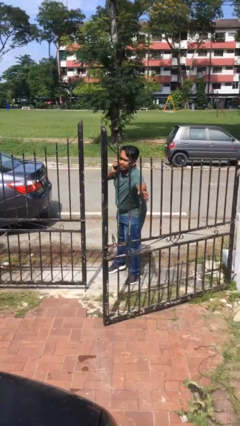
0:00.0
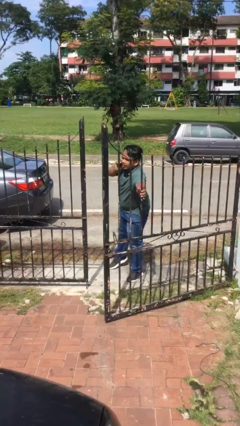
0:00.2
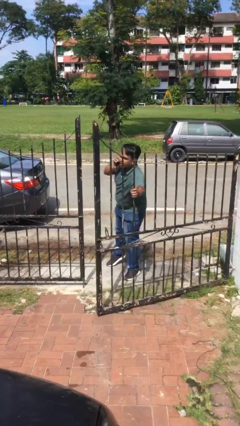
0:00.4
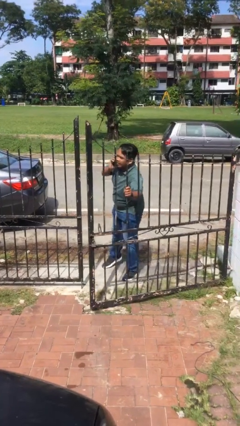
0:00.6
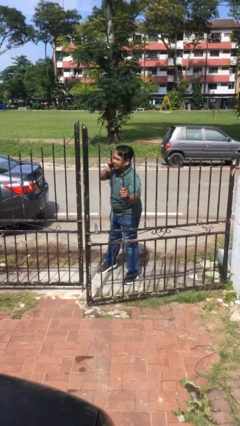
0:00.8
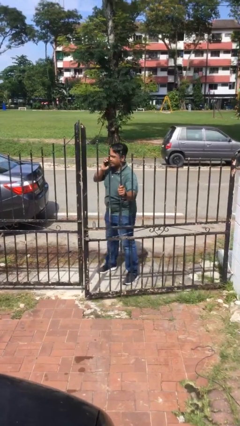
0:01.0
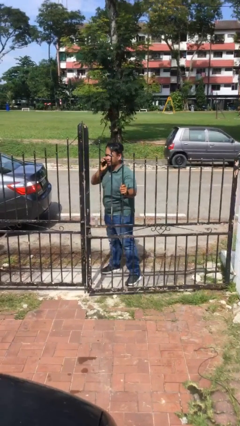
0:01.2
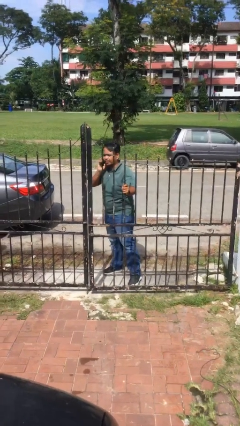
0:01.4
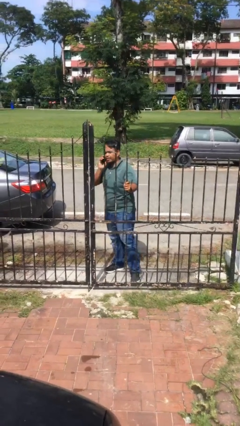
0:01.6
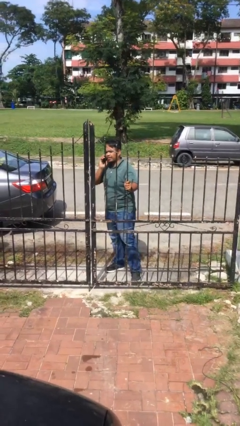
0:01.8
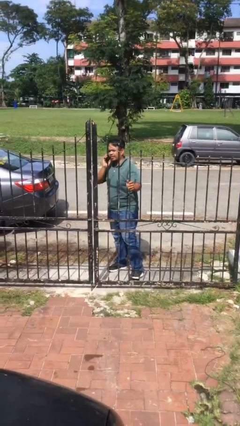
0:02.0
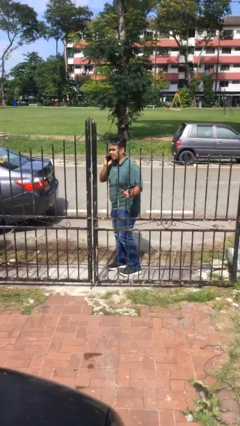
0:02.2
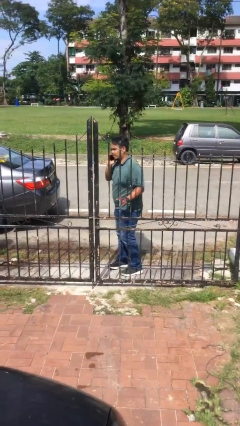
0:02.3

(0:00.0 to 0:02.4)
person closes facility door

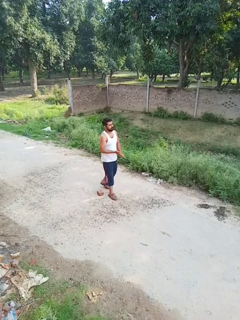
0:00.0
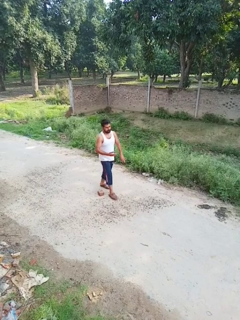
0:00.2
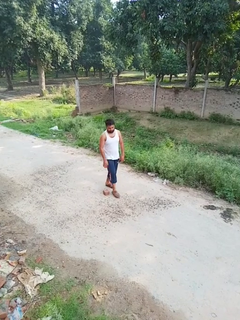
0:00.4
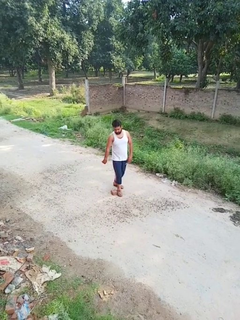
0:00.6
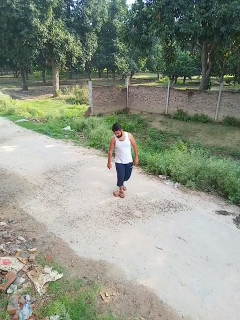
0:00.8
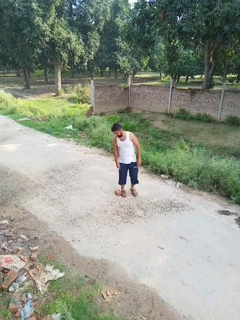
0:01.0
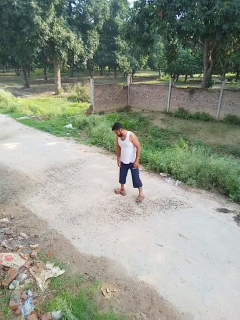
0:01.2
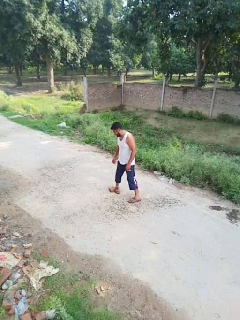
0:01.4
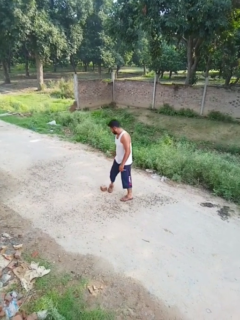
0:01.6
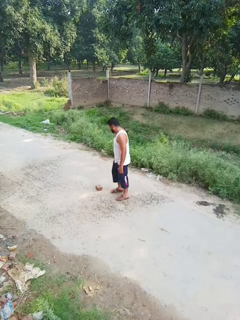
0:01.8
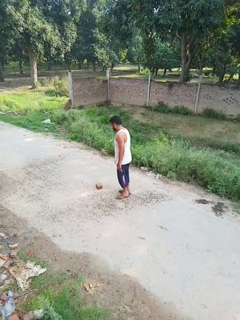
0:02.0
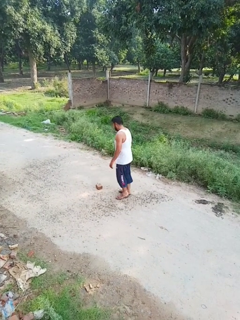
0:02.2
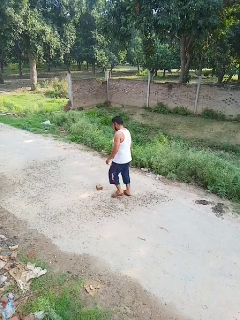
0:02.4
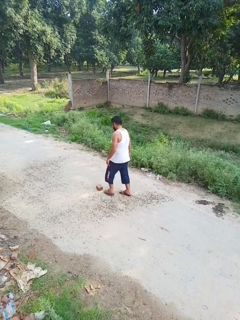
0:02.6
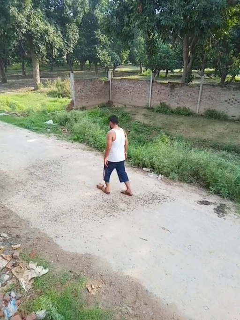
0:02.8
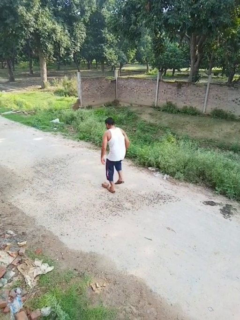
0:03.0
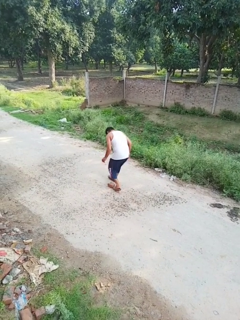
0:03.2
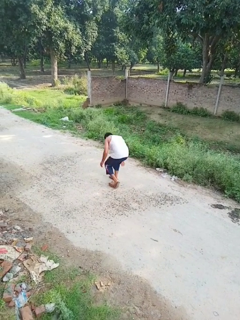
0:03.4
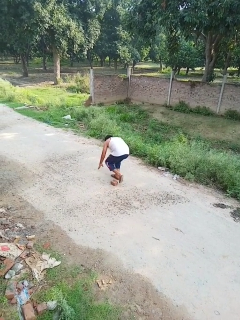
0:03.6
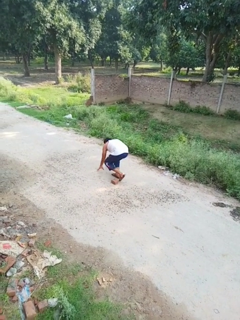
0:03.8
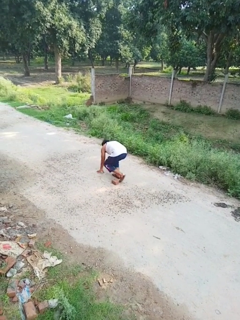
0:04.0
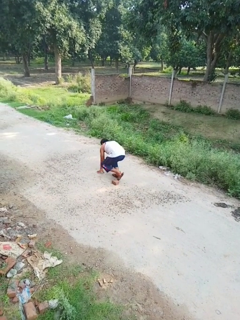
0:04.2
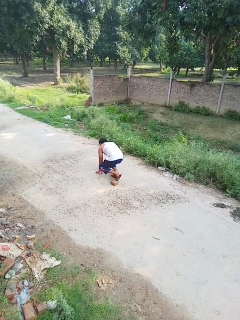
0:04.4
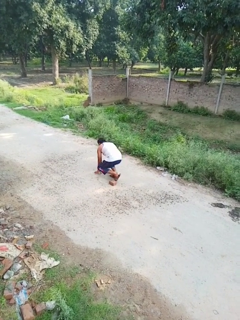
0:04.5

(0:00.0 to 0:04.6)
person trips on object on floor

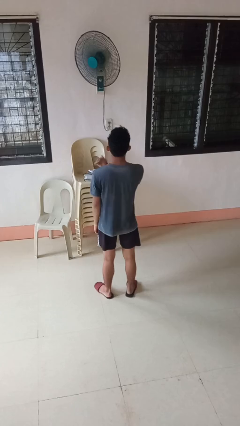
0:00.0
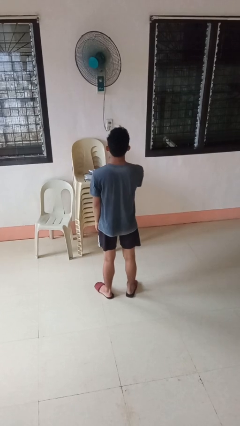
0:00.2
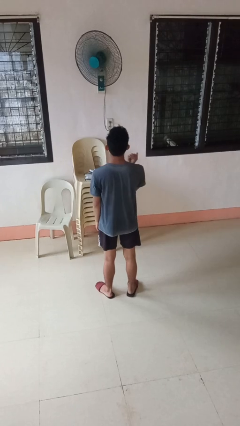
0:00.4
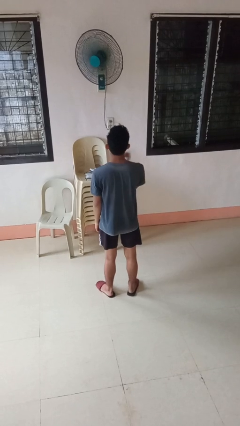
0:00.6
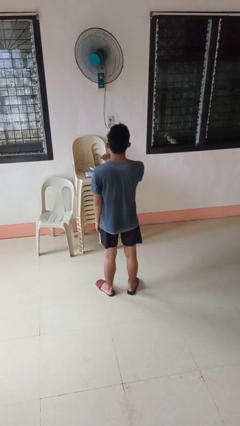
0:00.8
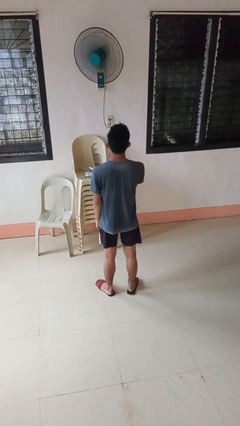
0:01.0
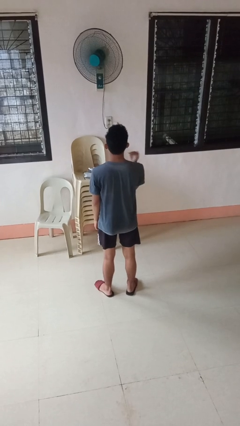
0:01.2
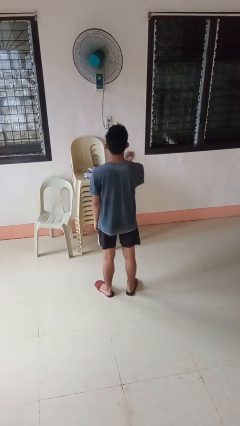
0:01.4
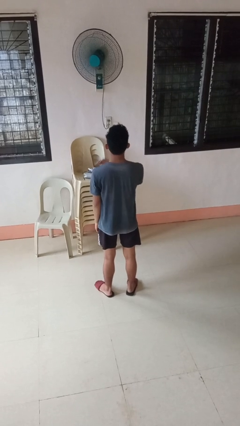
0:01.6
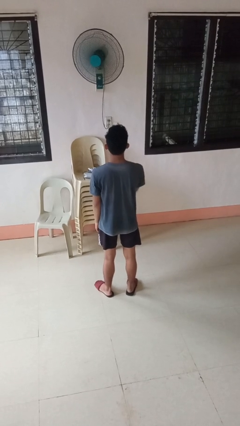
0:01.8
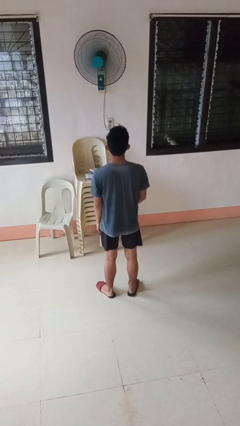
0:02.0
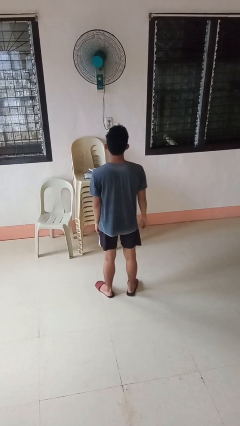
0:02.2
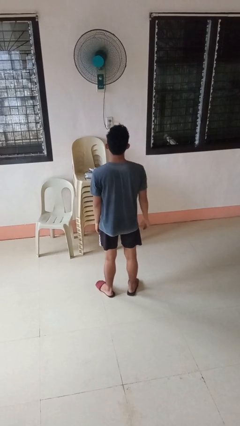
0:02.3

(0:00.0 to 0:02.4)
person gestures cut

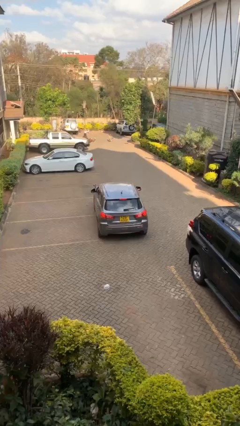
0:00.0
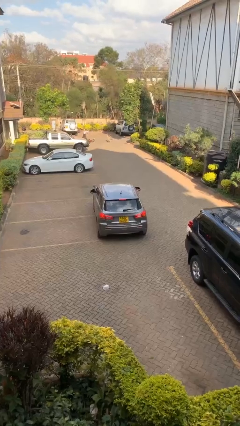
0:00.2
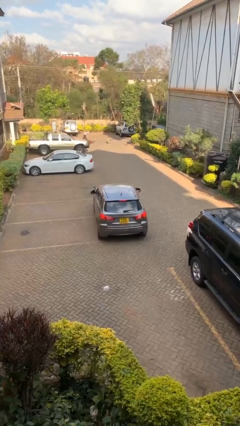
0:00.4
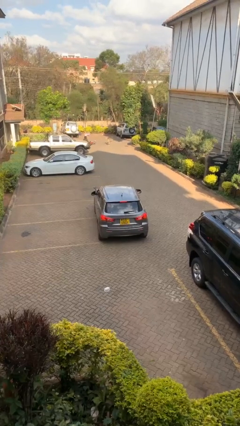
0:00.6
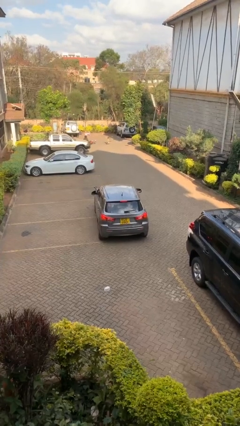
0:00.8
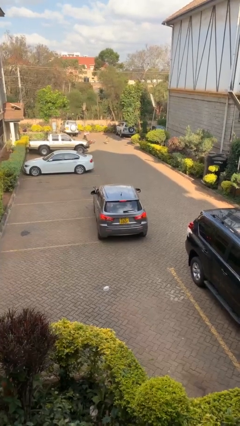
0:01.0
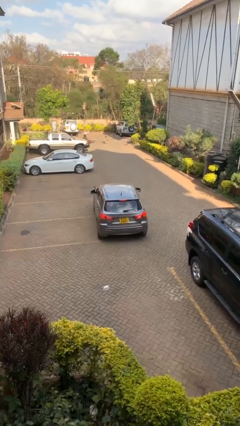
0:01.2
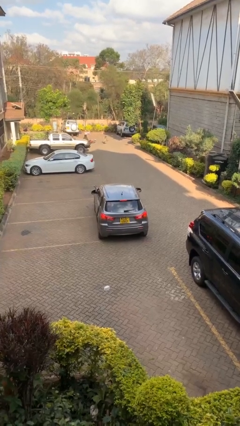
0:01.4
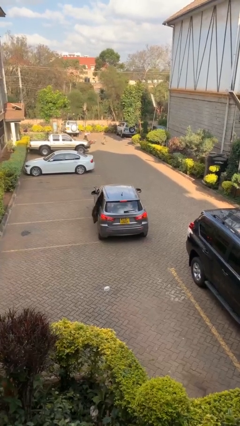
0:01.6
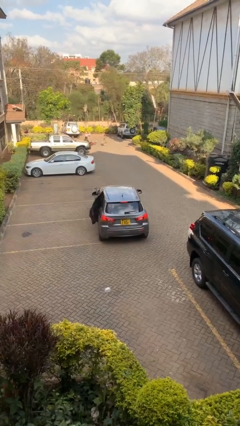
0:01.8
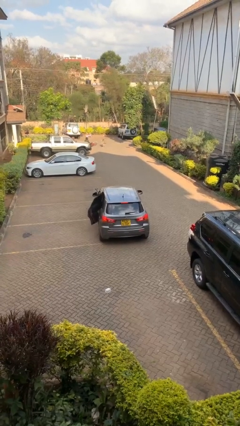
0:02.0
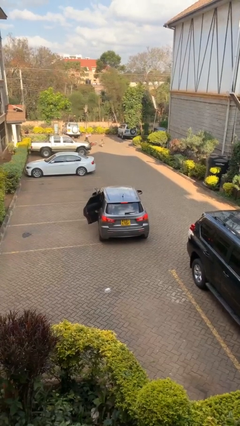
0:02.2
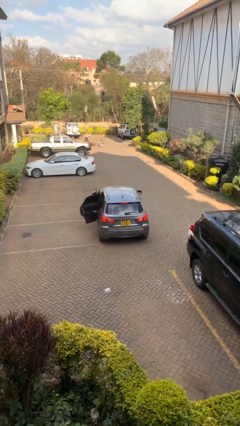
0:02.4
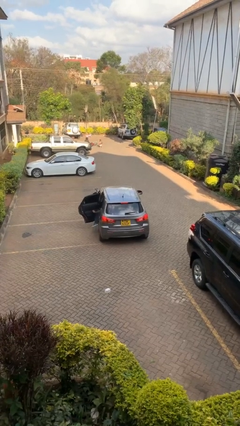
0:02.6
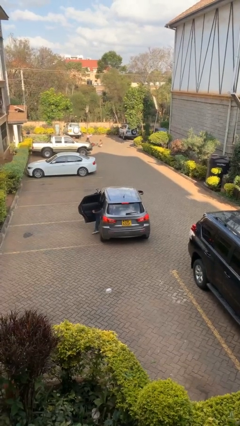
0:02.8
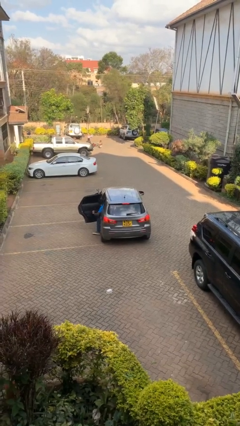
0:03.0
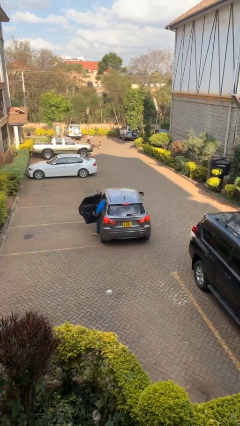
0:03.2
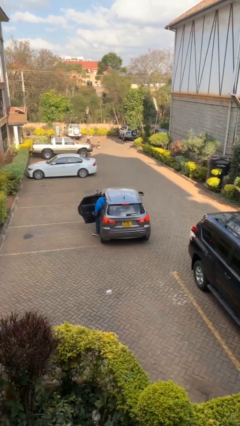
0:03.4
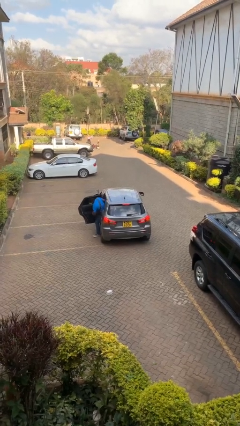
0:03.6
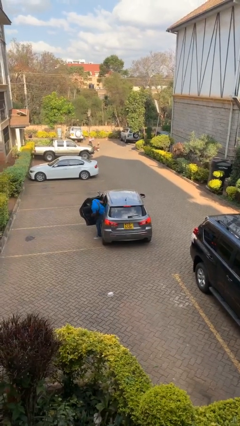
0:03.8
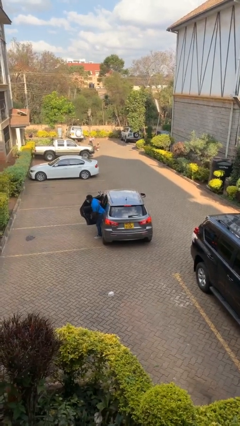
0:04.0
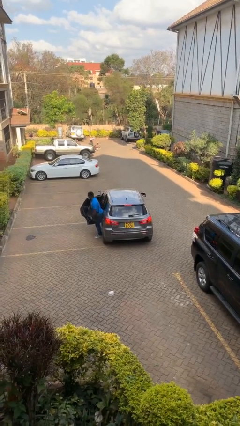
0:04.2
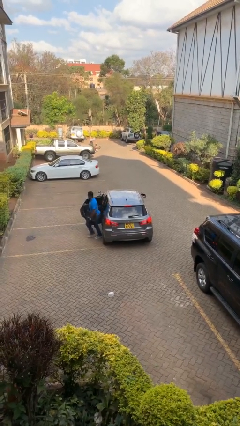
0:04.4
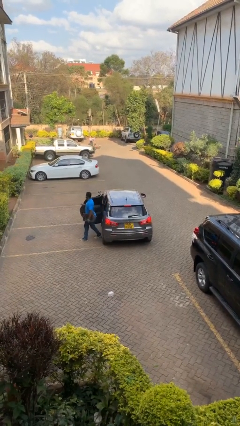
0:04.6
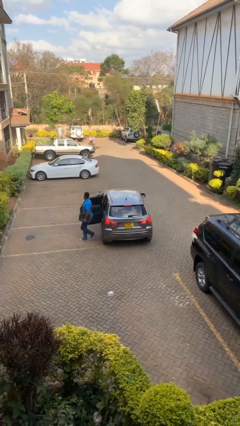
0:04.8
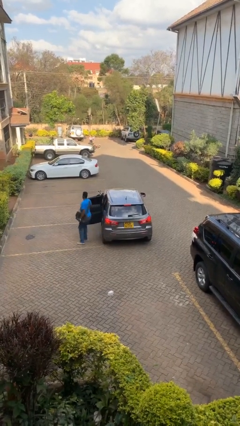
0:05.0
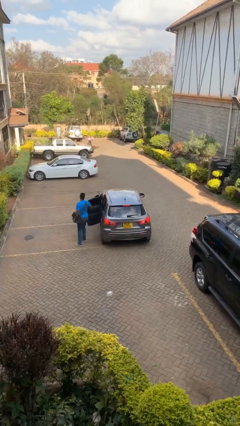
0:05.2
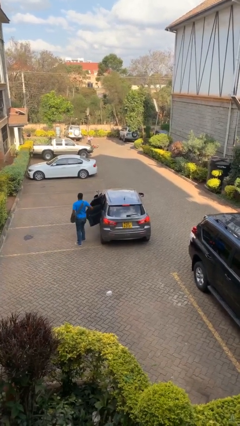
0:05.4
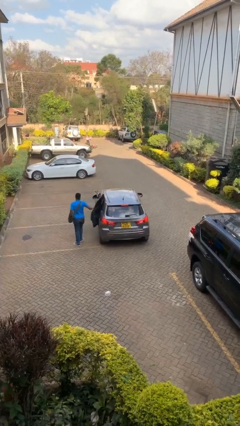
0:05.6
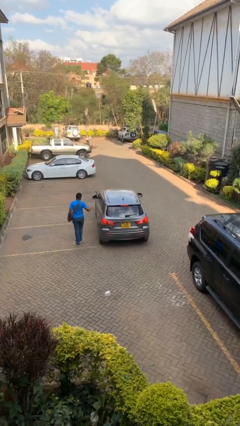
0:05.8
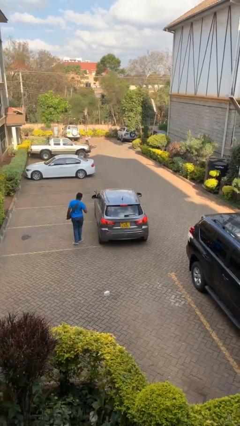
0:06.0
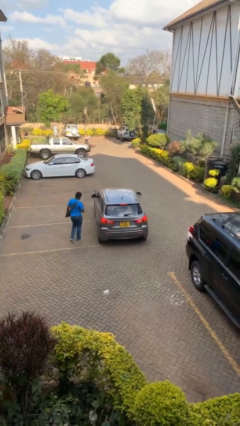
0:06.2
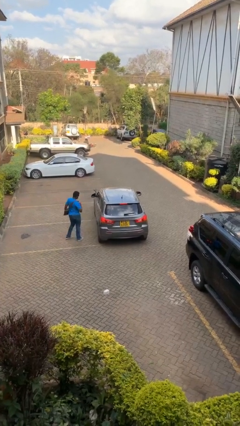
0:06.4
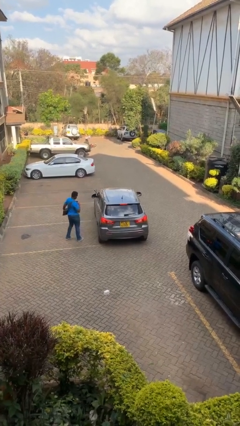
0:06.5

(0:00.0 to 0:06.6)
car drops off person

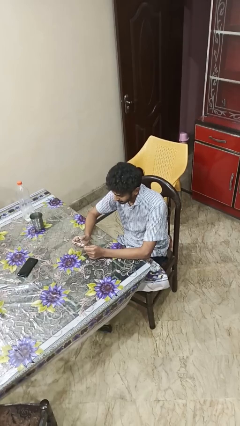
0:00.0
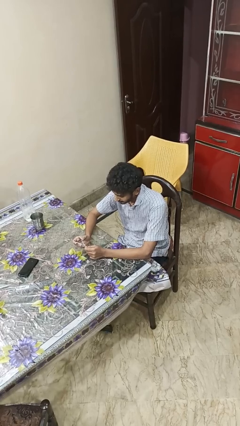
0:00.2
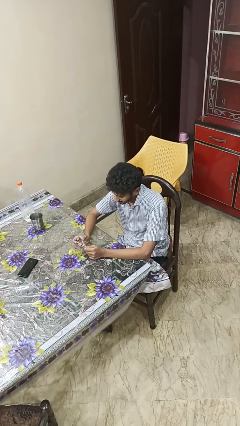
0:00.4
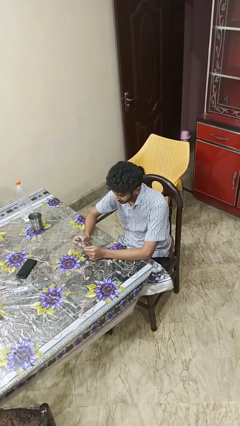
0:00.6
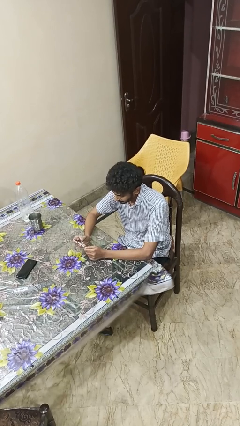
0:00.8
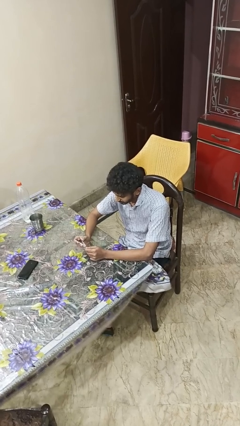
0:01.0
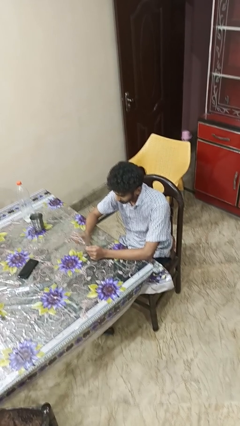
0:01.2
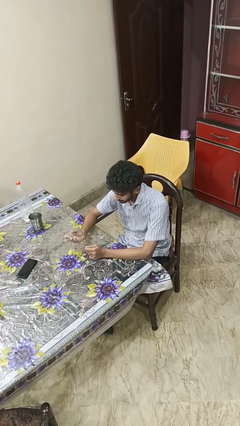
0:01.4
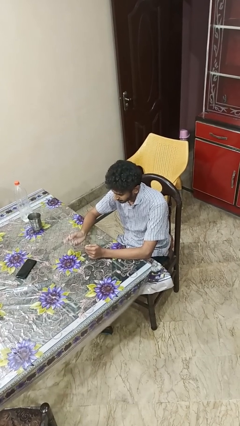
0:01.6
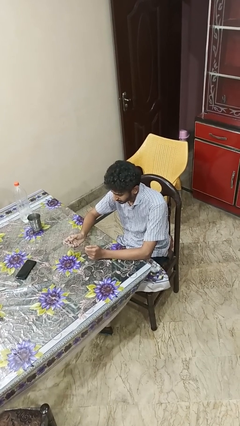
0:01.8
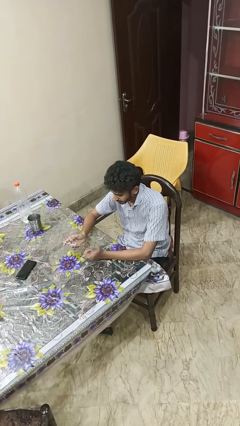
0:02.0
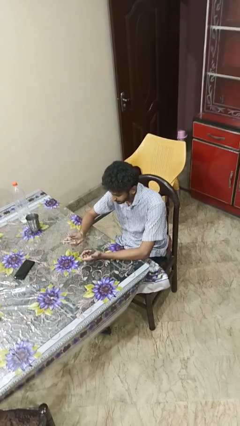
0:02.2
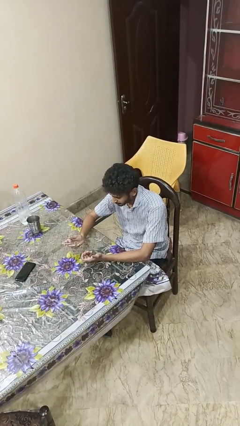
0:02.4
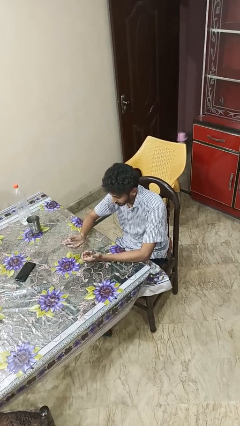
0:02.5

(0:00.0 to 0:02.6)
person clips fingernails
